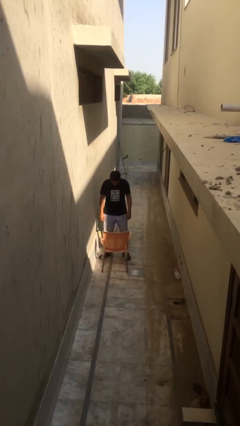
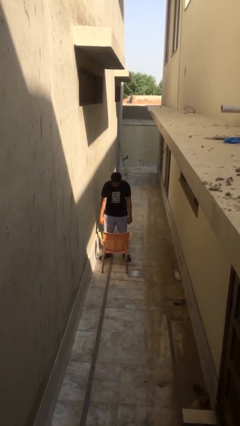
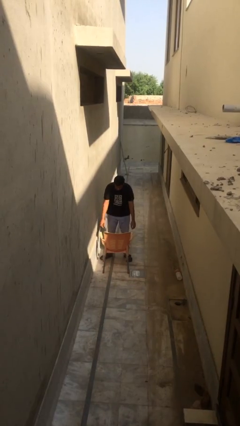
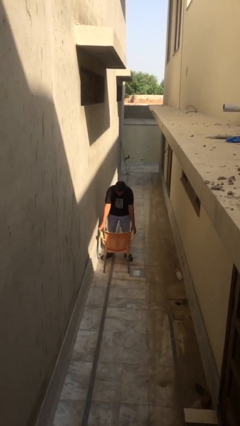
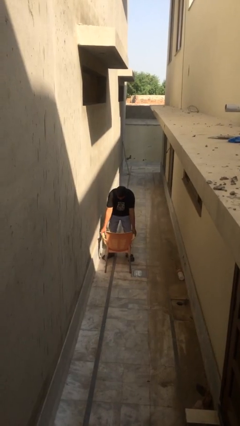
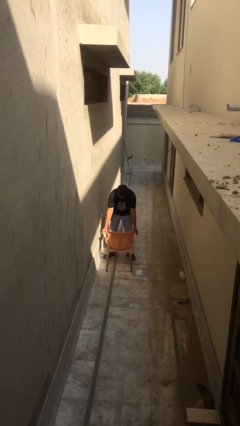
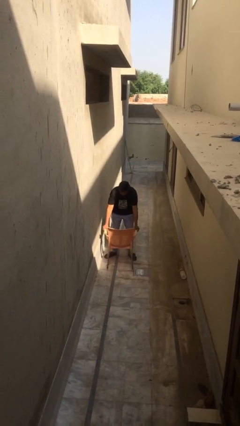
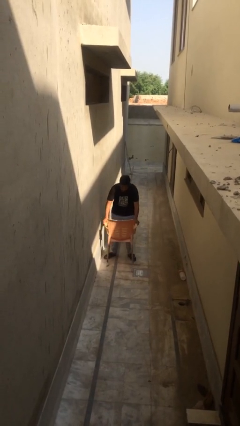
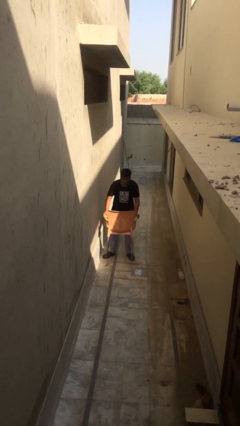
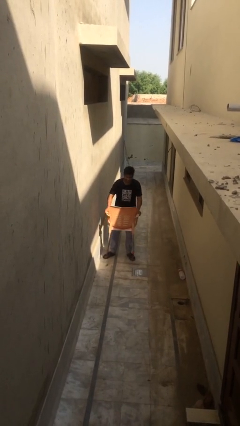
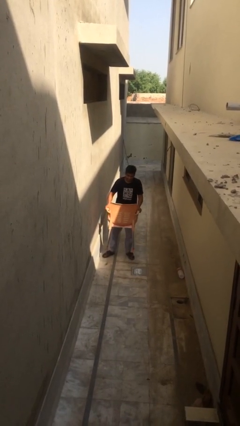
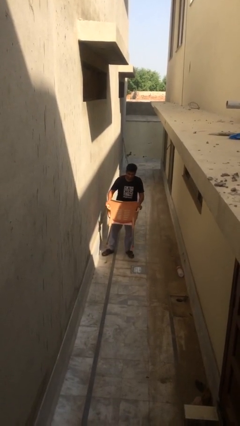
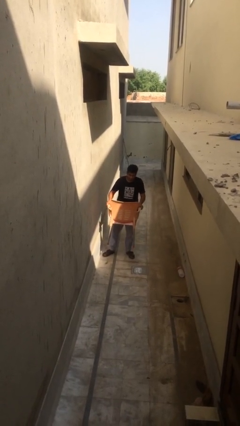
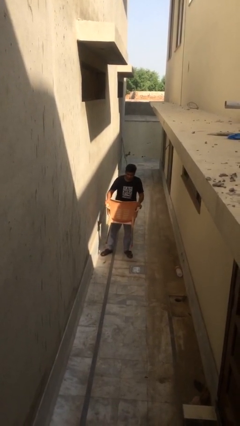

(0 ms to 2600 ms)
person picks up object from floor

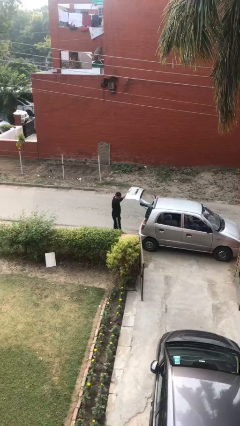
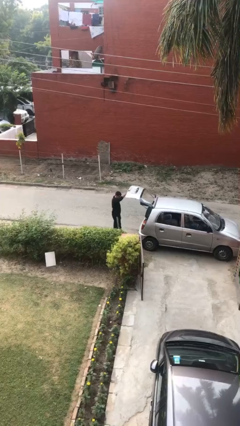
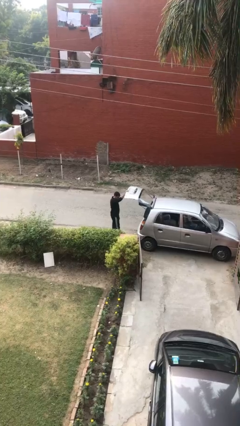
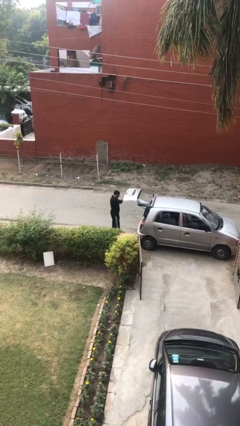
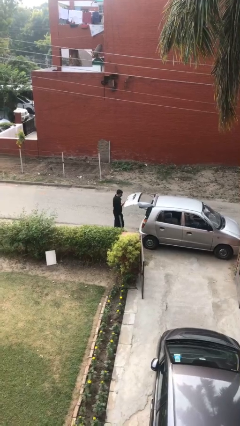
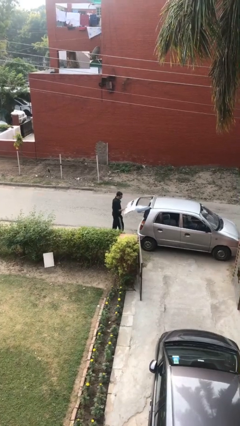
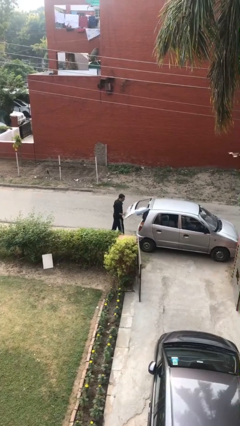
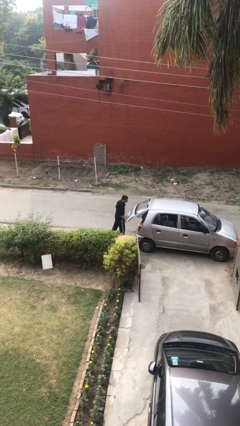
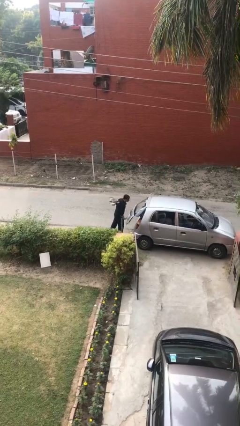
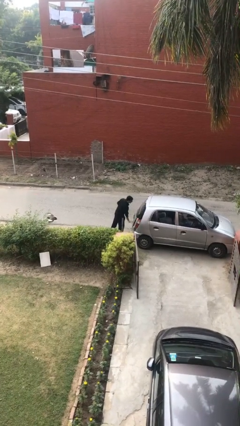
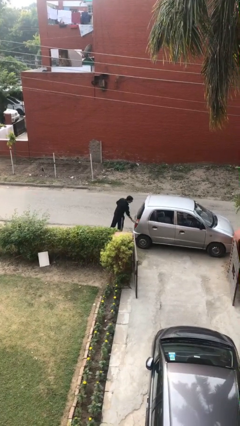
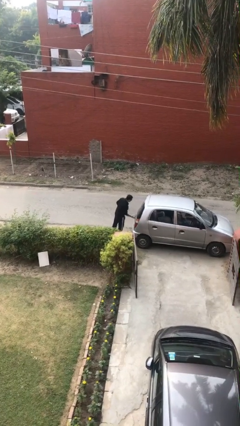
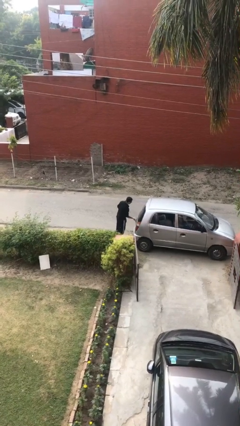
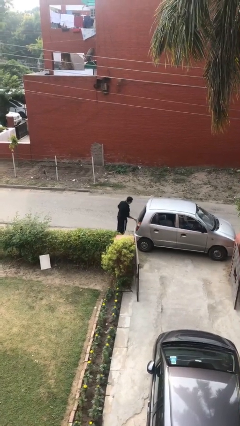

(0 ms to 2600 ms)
person closes car trunk

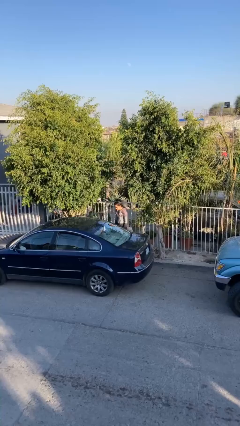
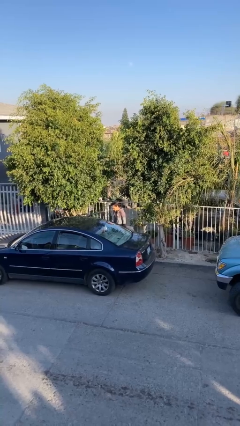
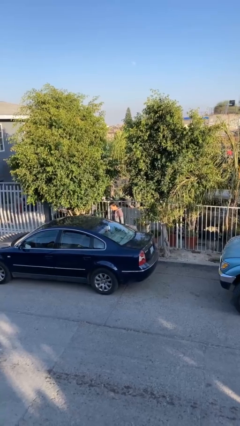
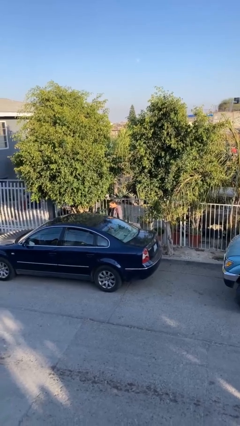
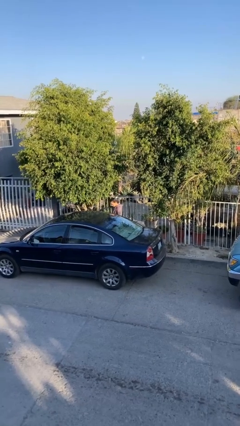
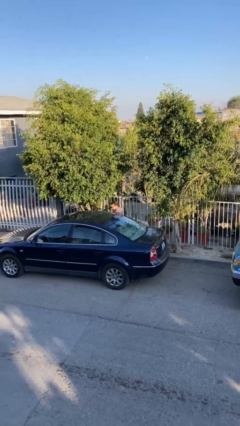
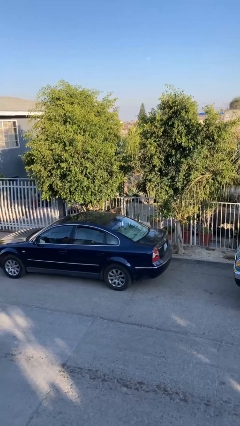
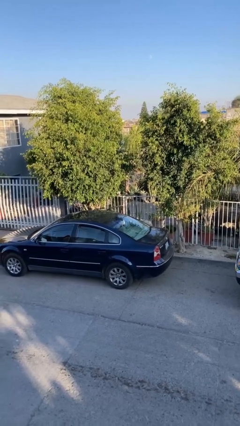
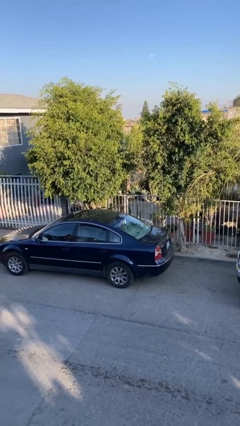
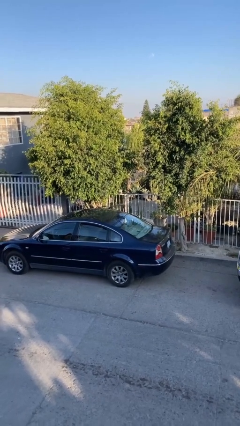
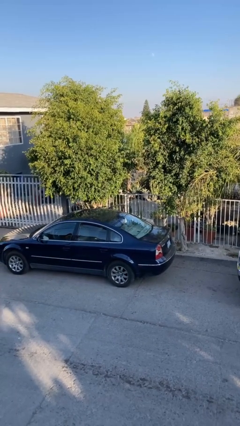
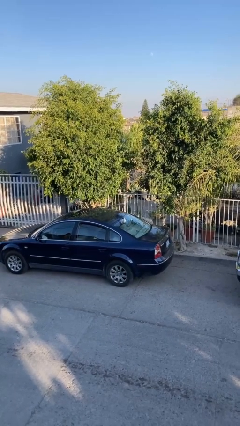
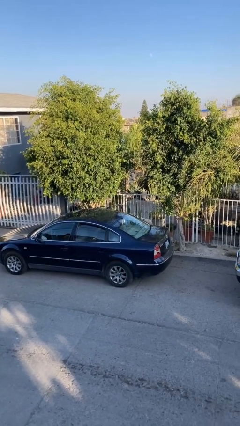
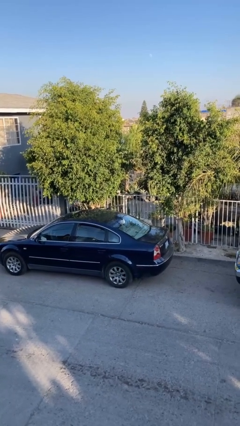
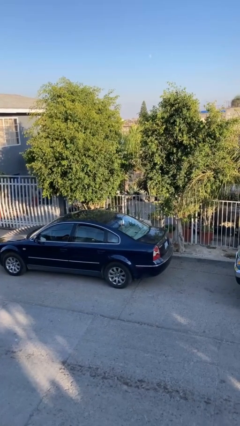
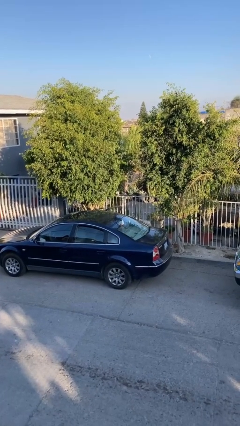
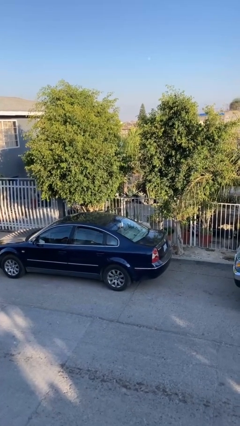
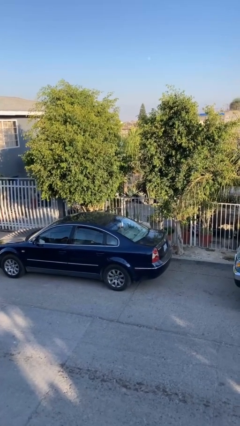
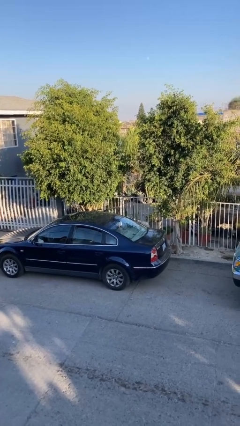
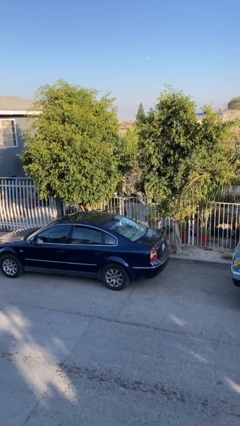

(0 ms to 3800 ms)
person enters car

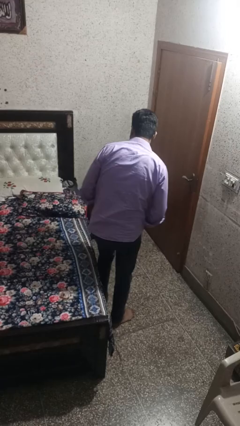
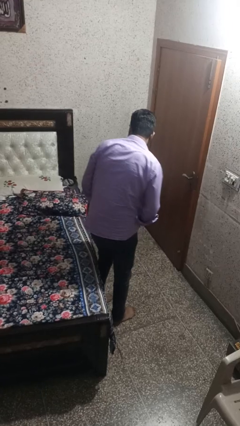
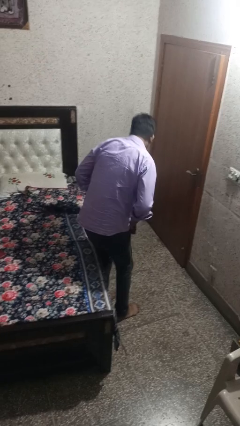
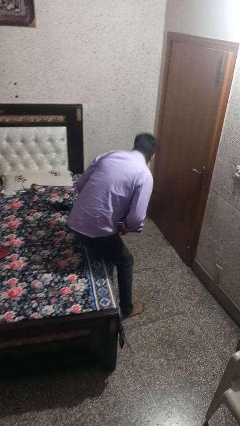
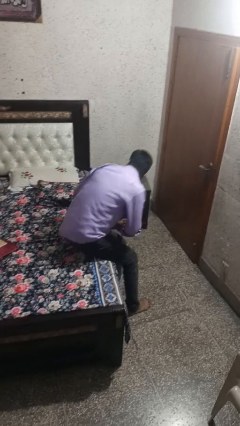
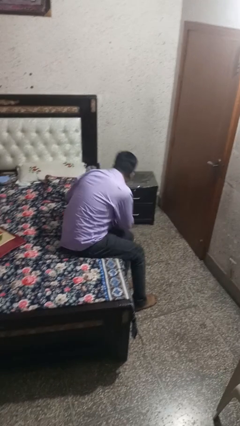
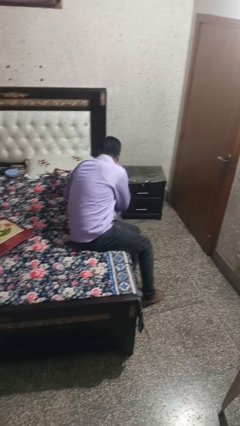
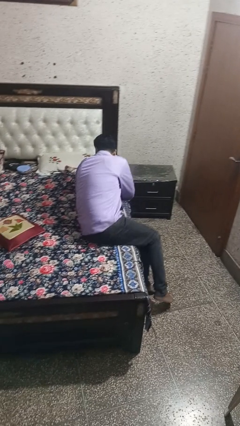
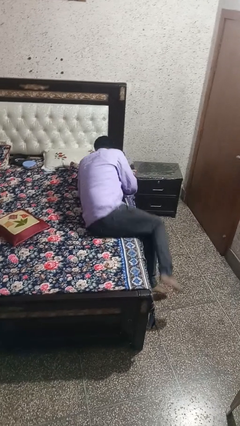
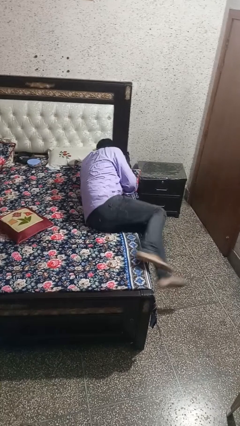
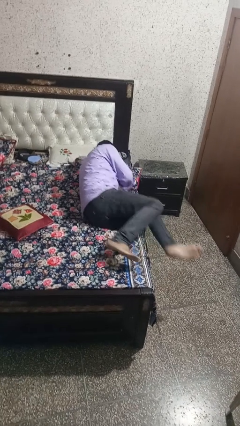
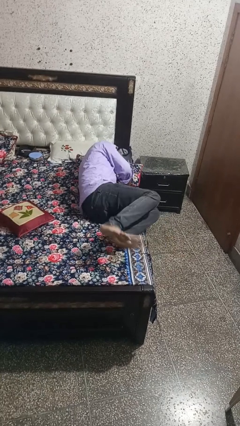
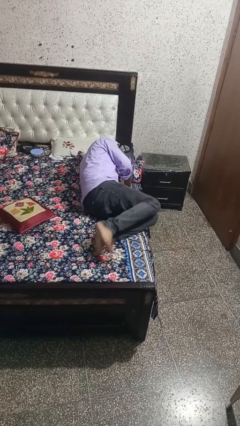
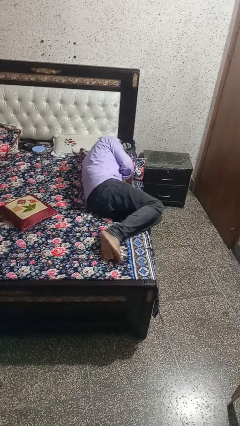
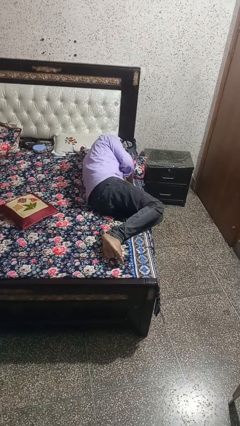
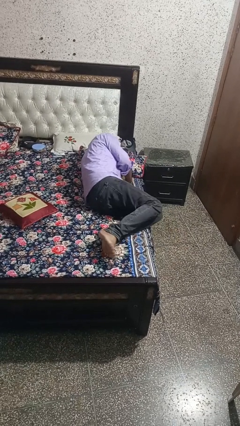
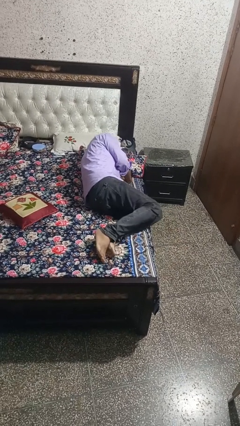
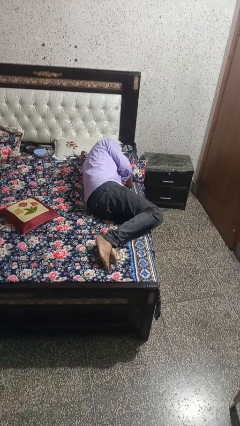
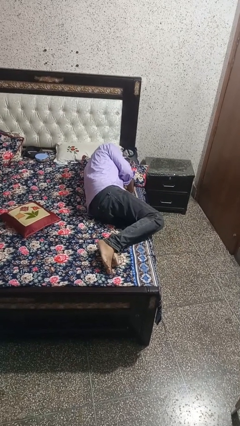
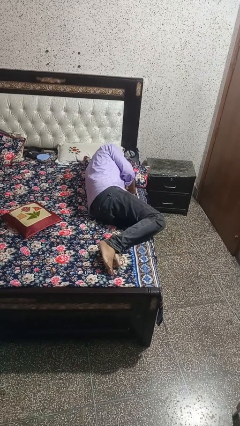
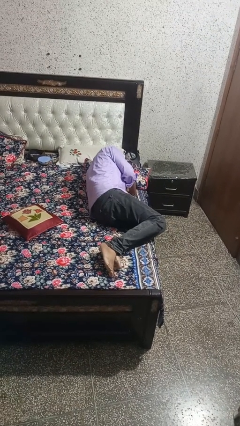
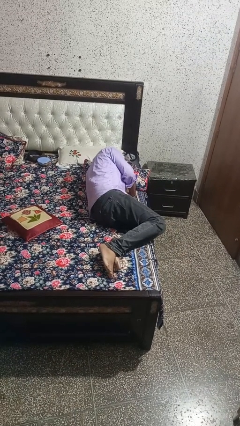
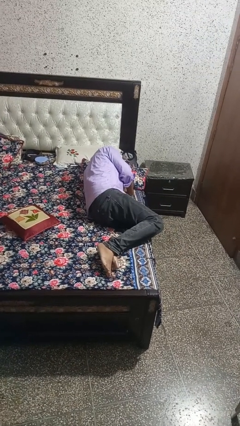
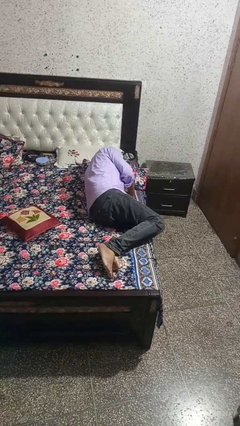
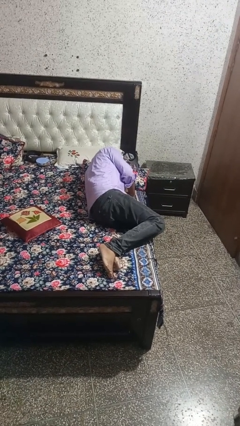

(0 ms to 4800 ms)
person lies down on bed

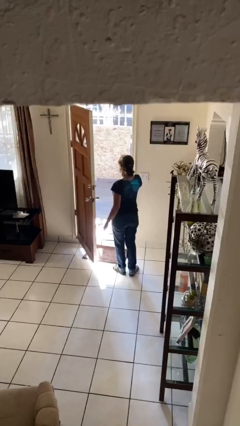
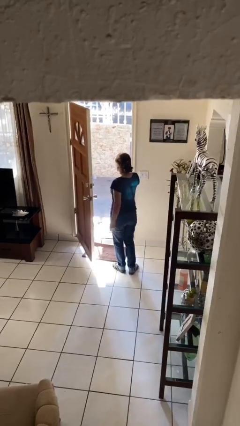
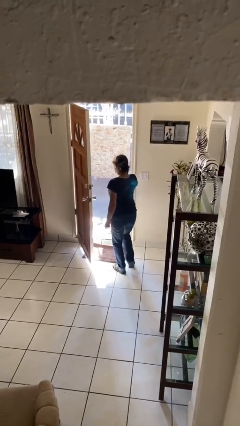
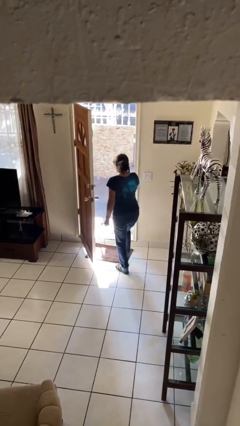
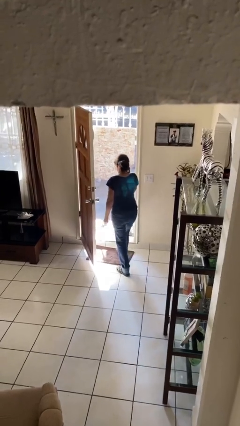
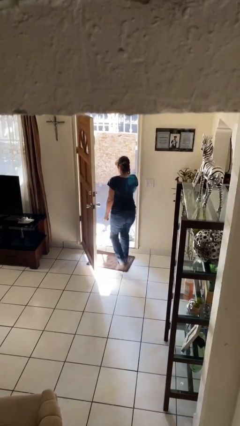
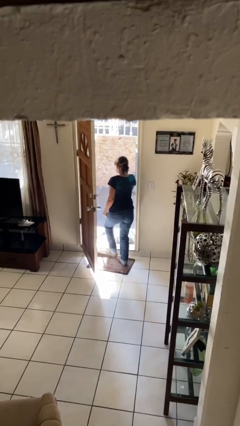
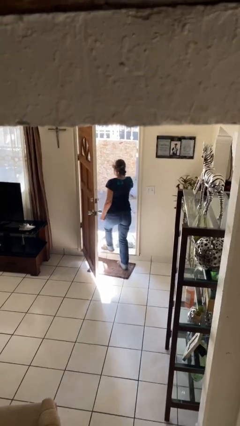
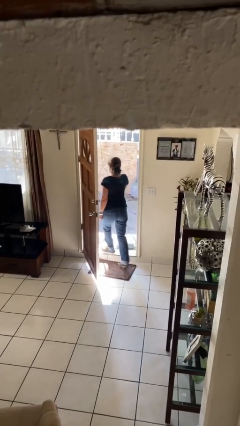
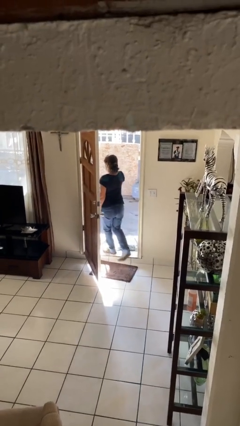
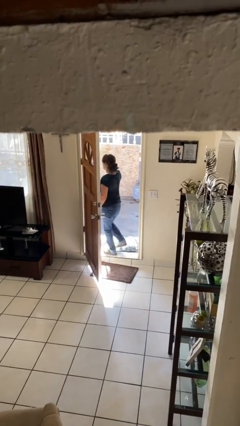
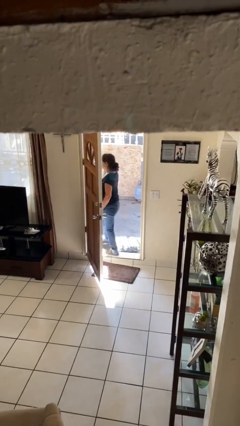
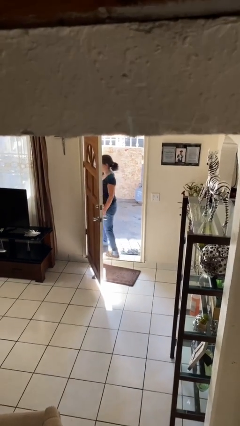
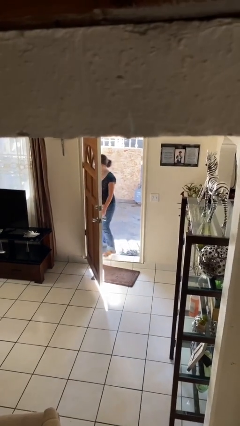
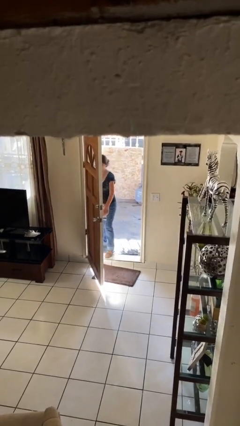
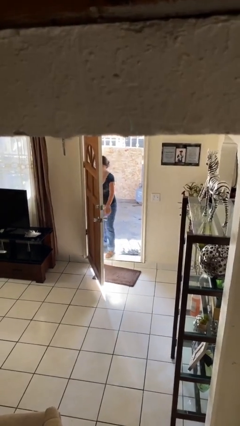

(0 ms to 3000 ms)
person exits scene through structure

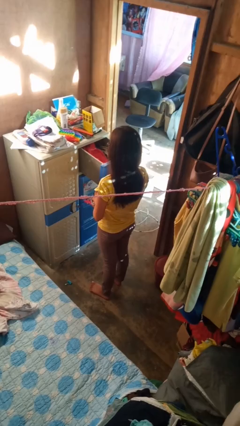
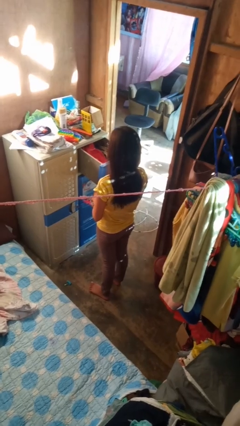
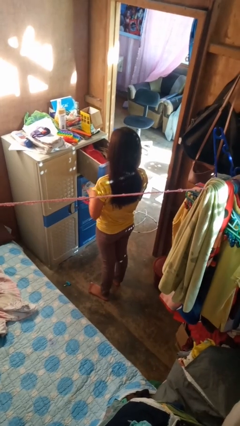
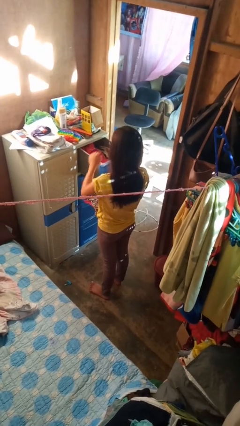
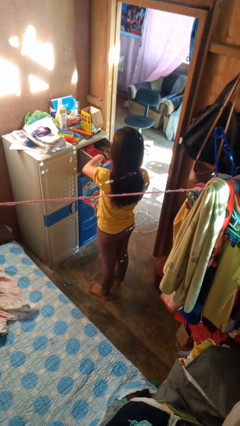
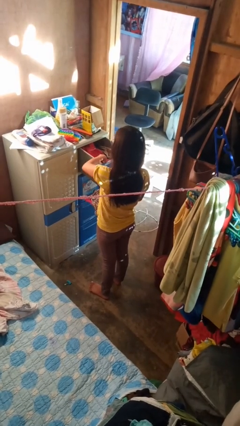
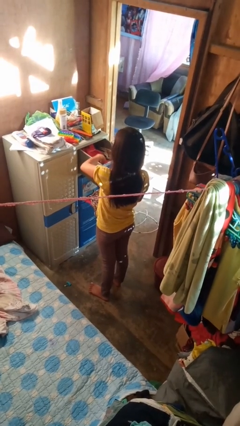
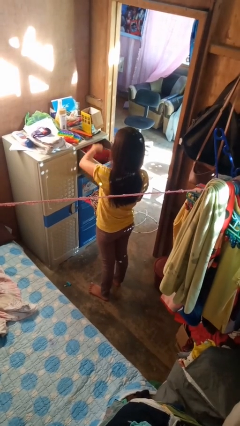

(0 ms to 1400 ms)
person takes clothes from dresser
